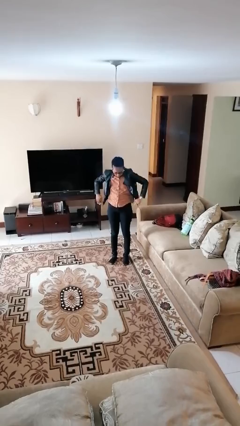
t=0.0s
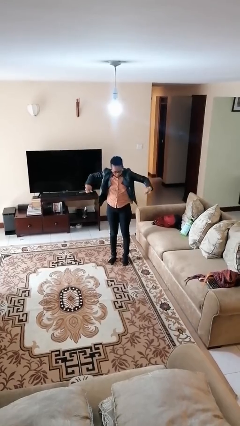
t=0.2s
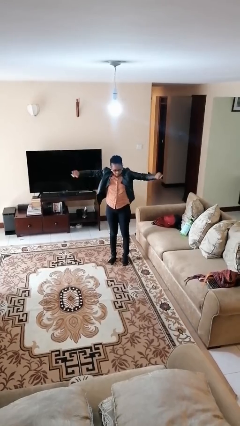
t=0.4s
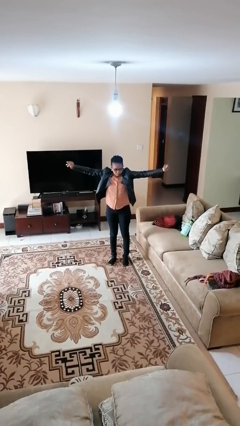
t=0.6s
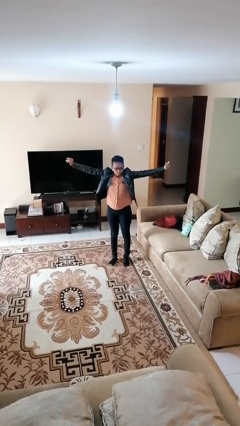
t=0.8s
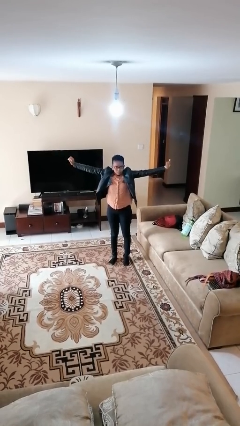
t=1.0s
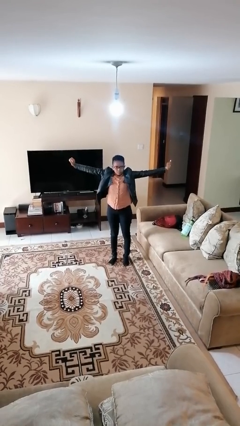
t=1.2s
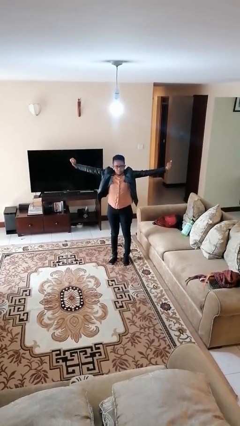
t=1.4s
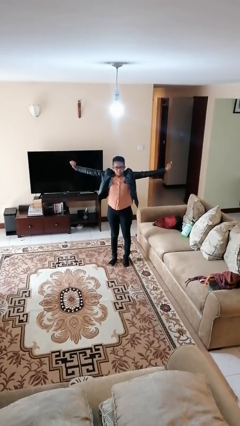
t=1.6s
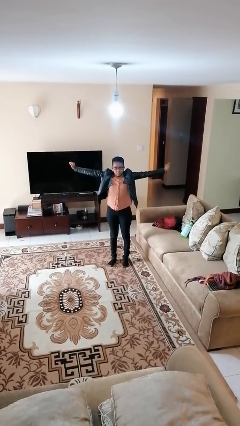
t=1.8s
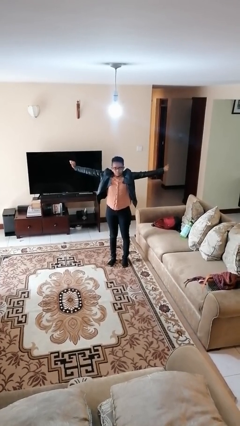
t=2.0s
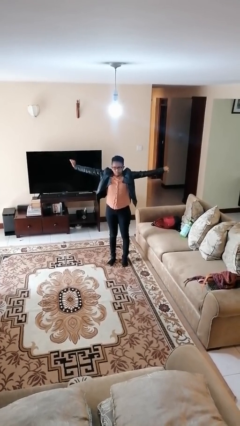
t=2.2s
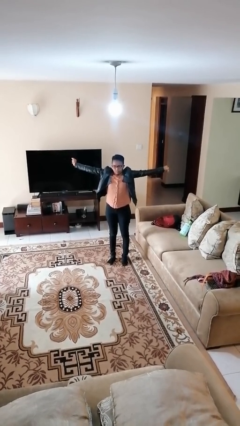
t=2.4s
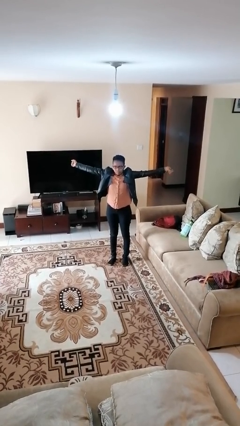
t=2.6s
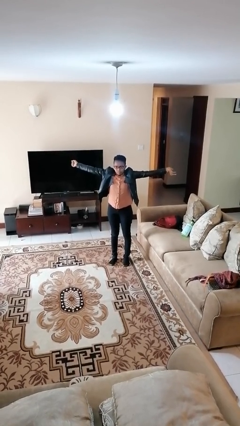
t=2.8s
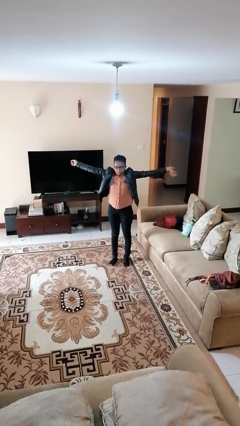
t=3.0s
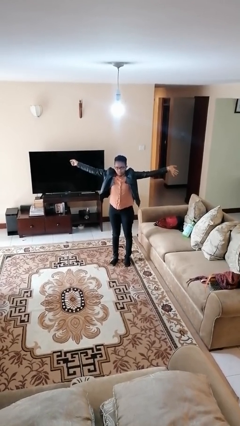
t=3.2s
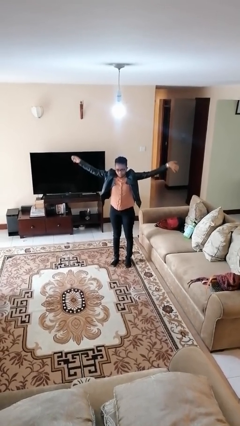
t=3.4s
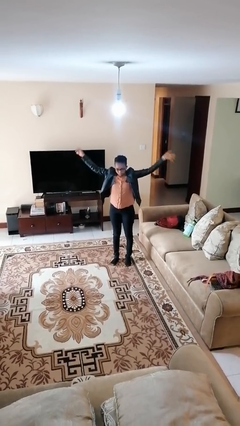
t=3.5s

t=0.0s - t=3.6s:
person stretches arms to side

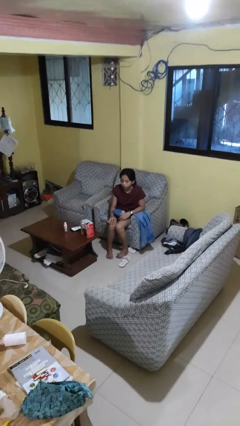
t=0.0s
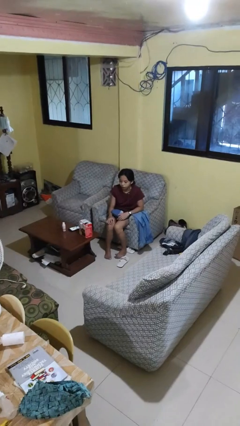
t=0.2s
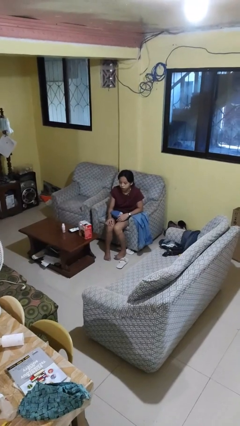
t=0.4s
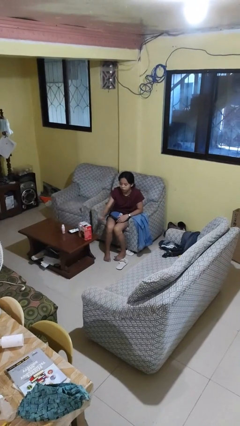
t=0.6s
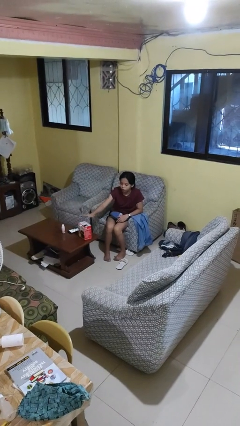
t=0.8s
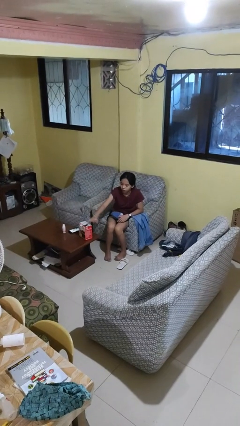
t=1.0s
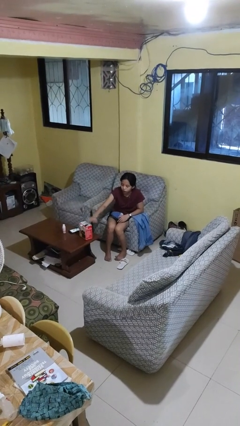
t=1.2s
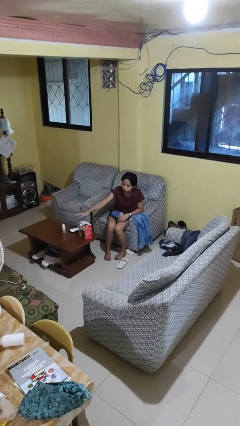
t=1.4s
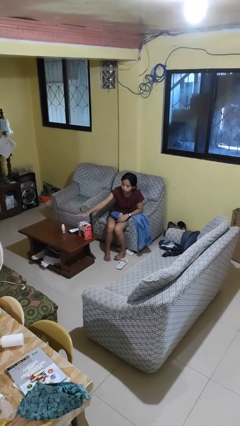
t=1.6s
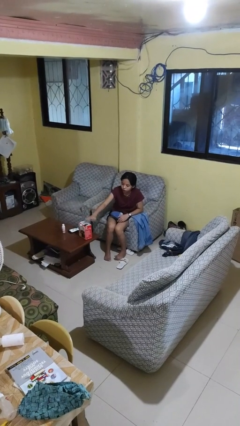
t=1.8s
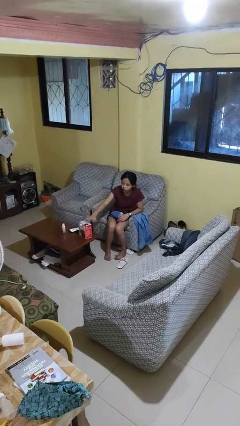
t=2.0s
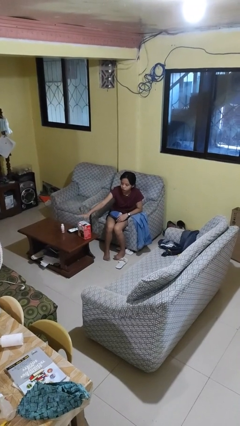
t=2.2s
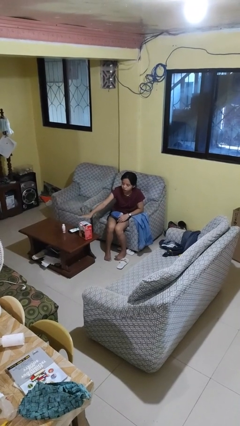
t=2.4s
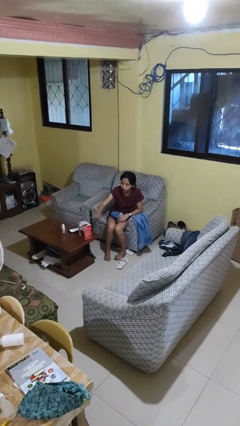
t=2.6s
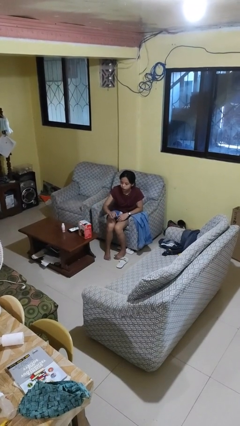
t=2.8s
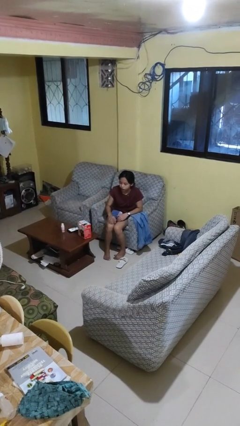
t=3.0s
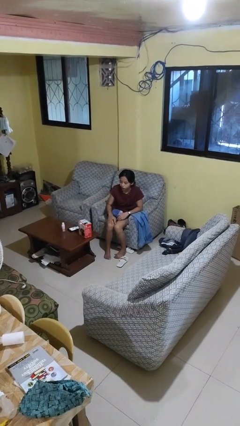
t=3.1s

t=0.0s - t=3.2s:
person waves hand over object

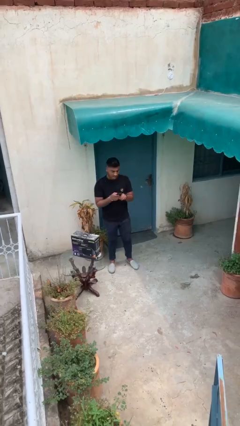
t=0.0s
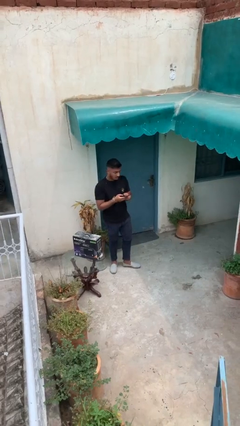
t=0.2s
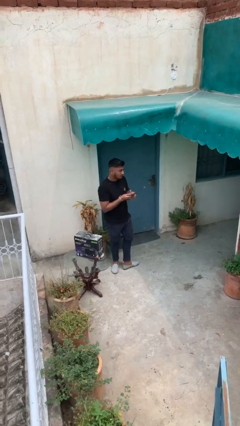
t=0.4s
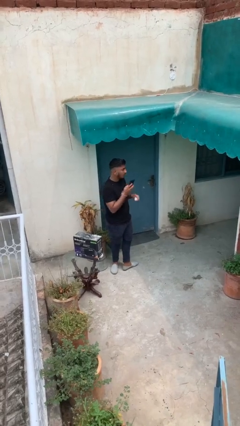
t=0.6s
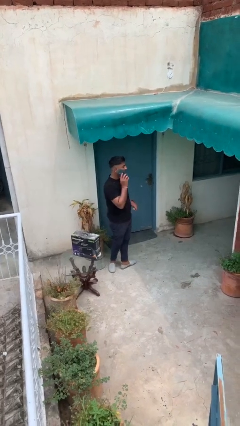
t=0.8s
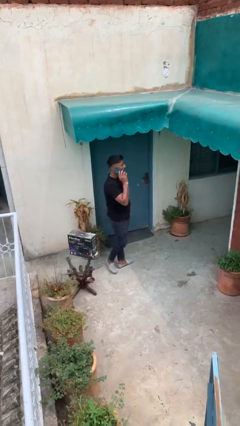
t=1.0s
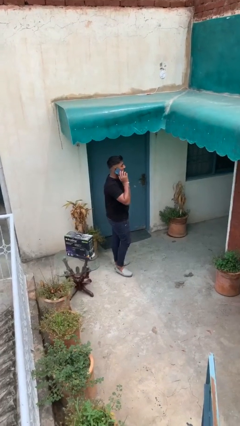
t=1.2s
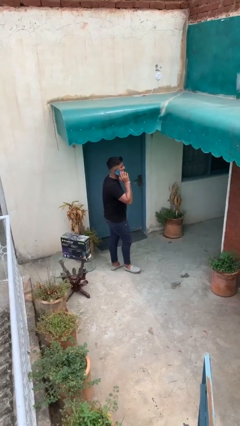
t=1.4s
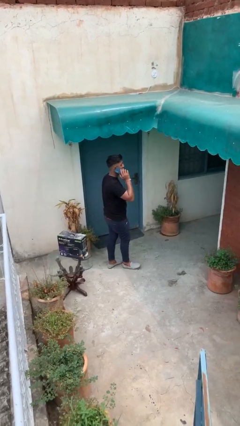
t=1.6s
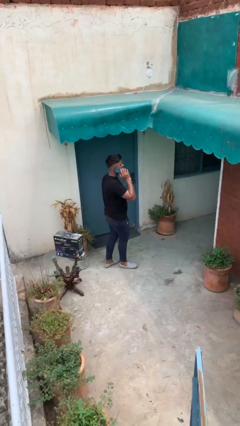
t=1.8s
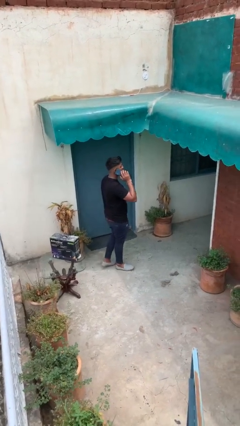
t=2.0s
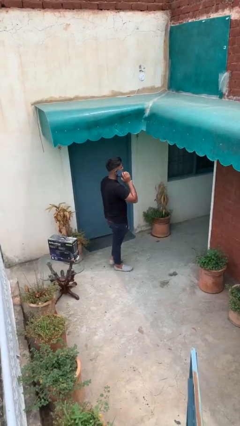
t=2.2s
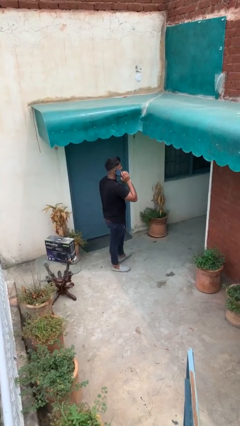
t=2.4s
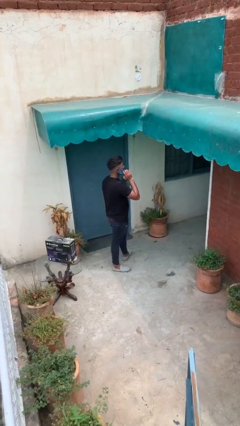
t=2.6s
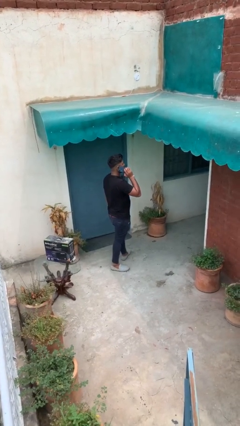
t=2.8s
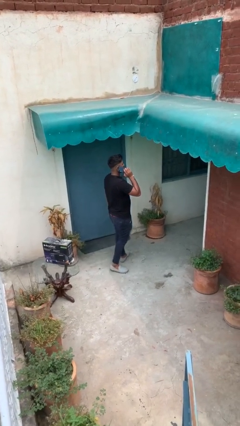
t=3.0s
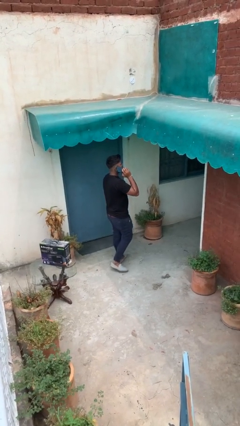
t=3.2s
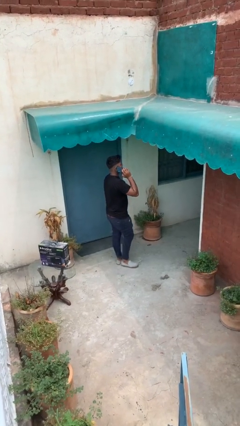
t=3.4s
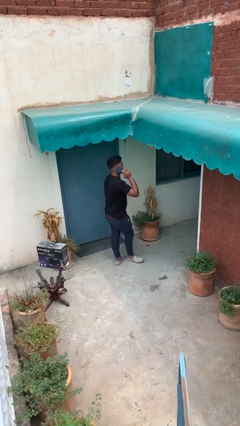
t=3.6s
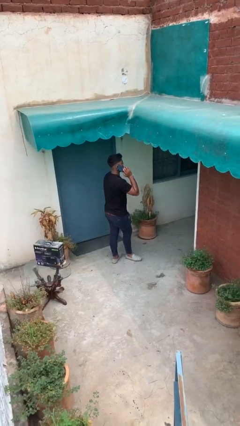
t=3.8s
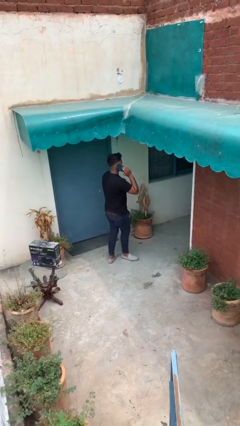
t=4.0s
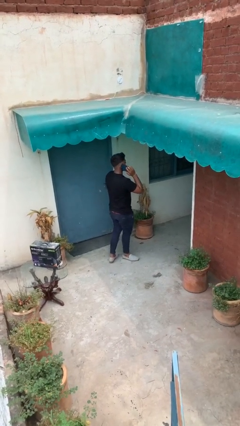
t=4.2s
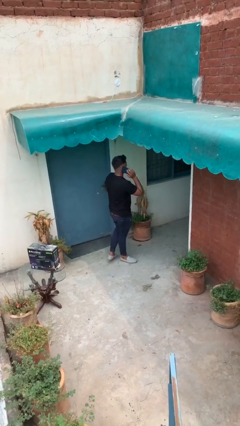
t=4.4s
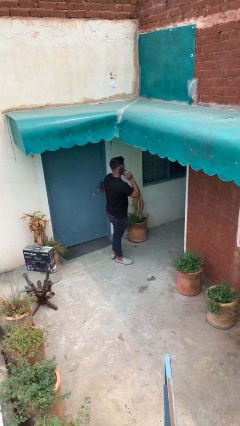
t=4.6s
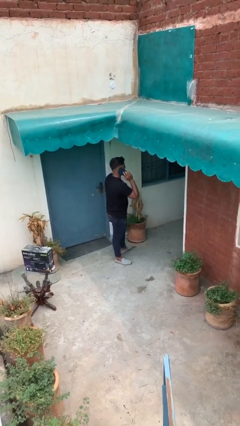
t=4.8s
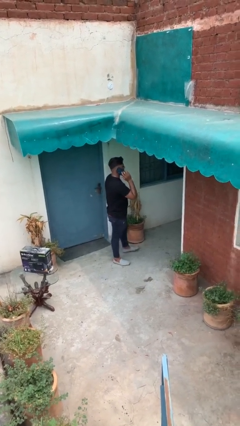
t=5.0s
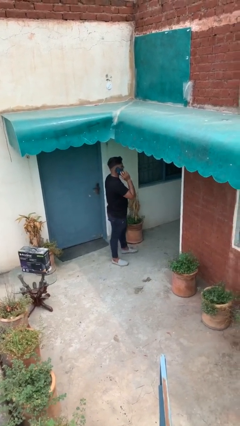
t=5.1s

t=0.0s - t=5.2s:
person talks on phone

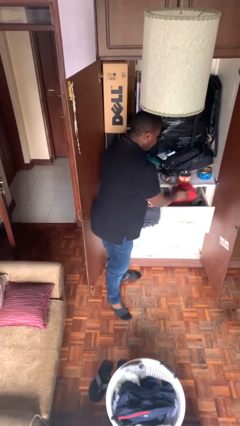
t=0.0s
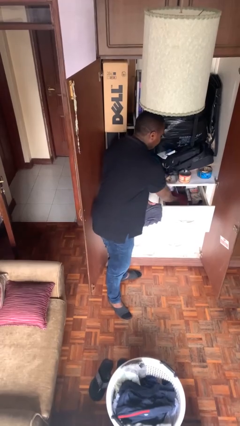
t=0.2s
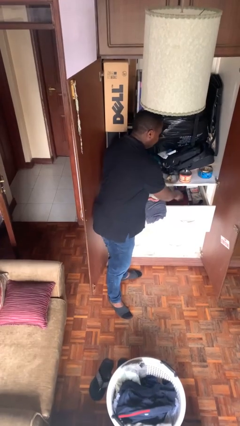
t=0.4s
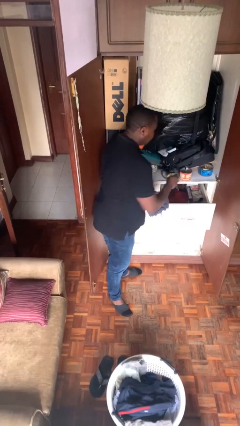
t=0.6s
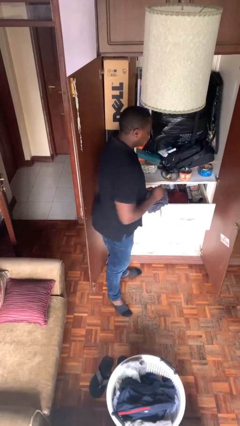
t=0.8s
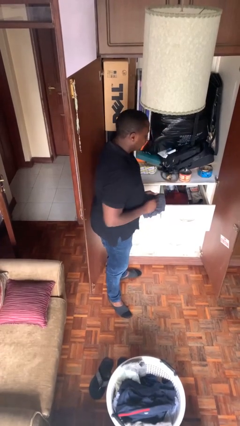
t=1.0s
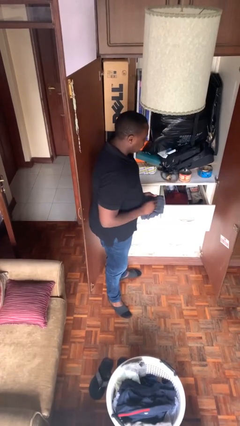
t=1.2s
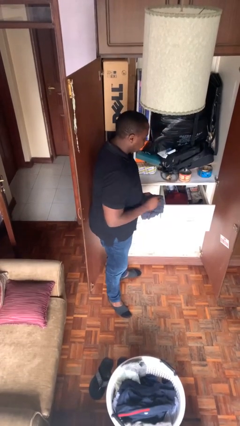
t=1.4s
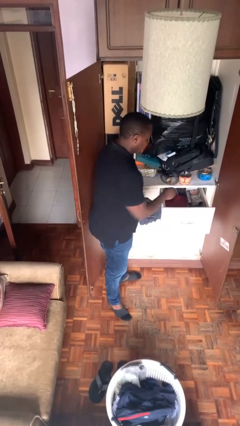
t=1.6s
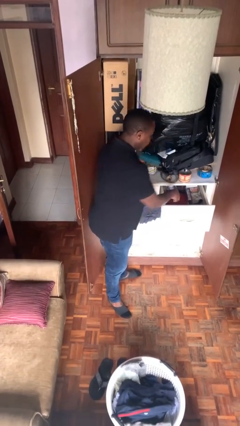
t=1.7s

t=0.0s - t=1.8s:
person puts clothes into dresser

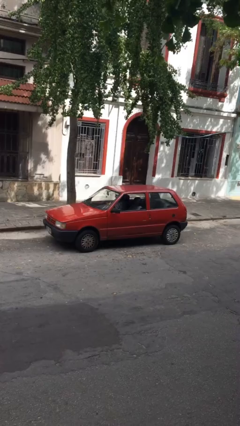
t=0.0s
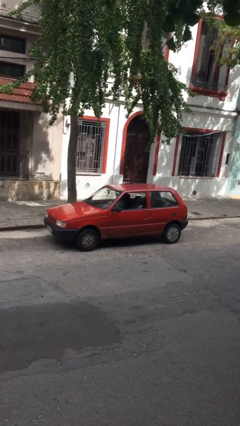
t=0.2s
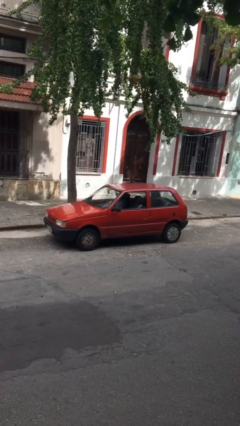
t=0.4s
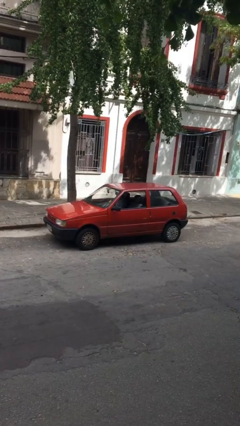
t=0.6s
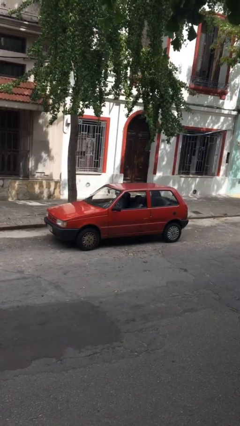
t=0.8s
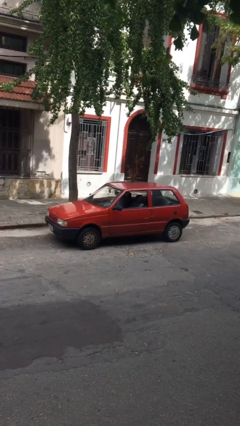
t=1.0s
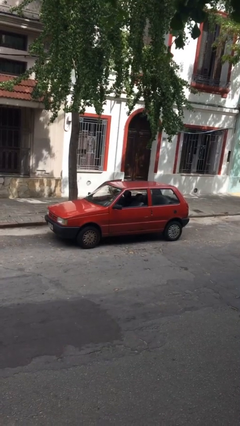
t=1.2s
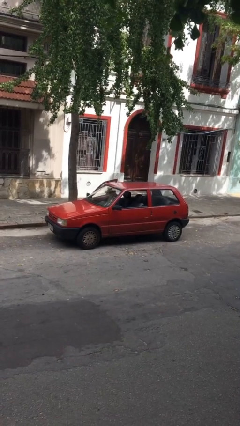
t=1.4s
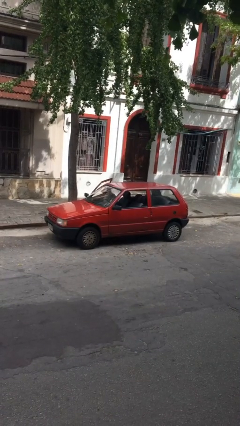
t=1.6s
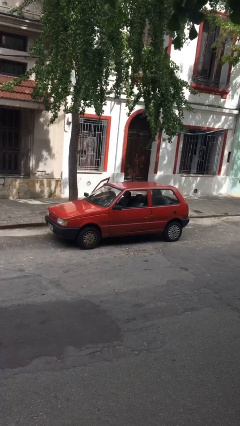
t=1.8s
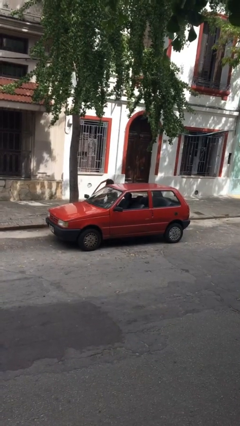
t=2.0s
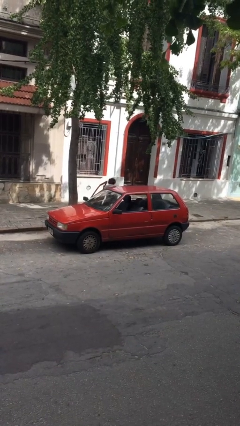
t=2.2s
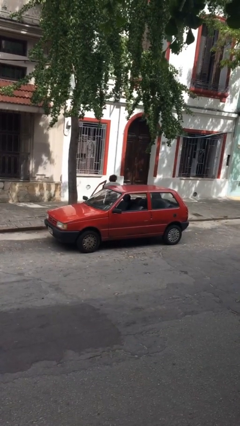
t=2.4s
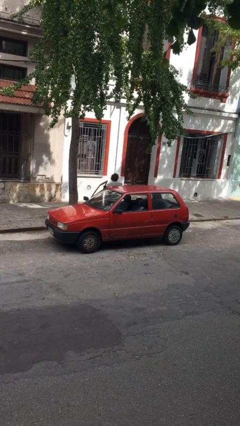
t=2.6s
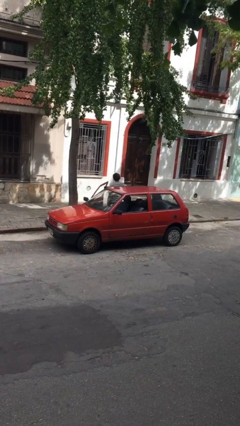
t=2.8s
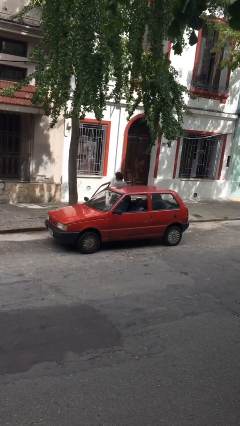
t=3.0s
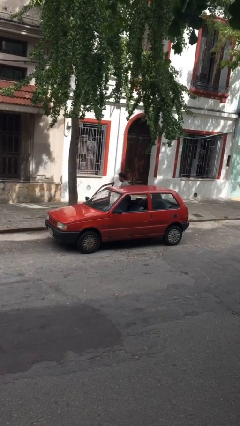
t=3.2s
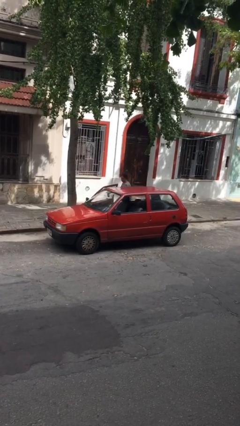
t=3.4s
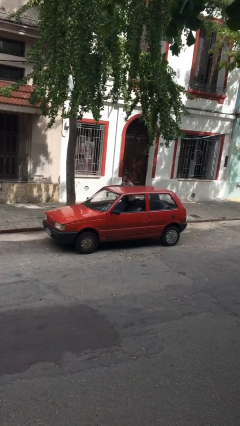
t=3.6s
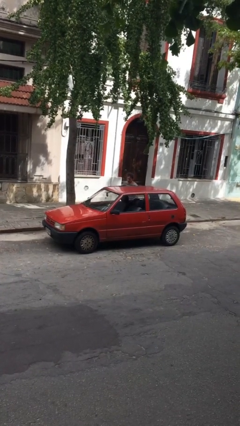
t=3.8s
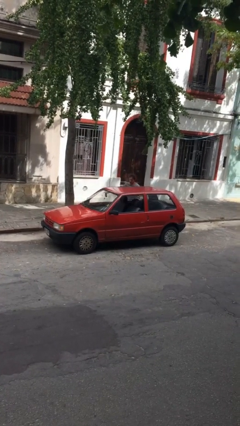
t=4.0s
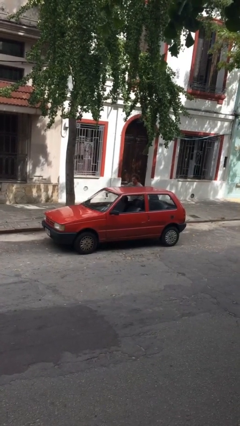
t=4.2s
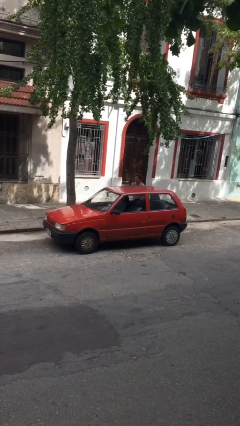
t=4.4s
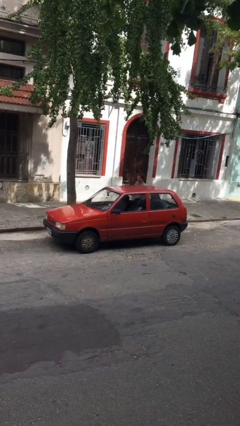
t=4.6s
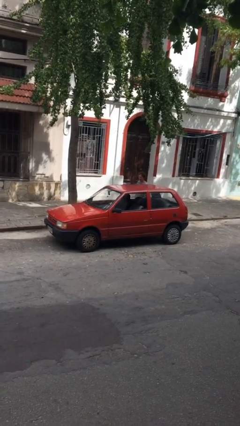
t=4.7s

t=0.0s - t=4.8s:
car drops off person
